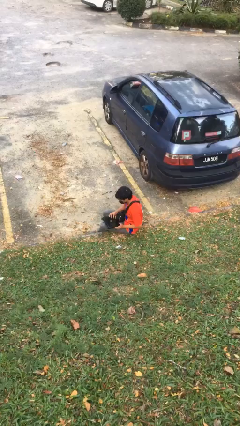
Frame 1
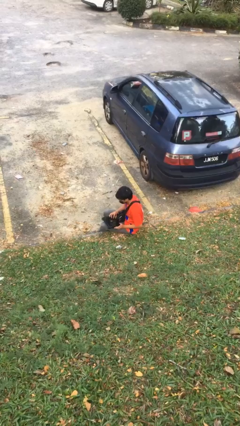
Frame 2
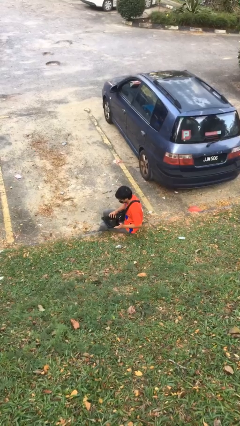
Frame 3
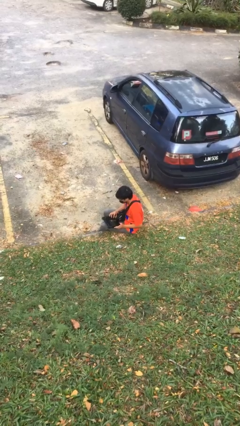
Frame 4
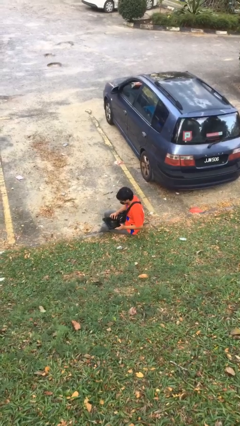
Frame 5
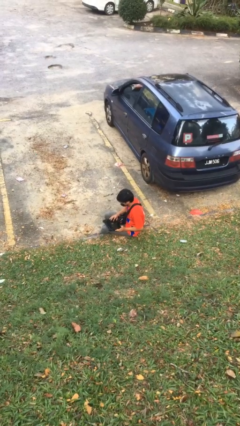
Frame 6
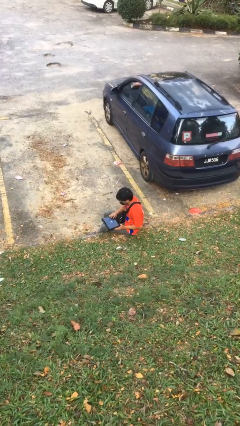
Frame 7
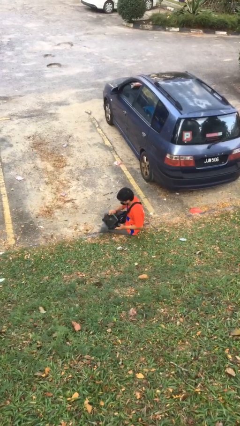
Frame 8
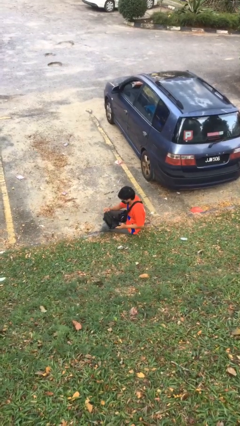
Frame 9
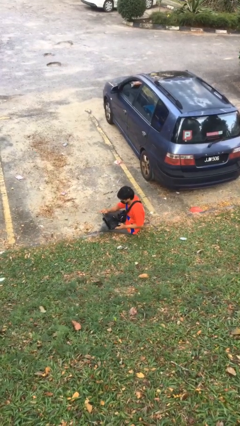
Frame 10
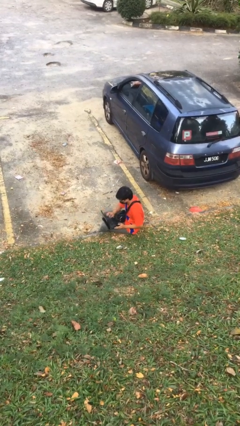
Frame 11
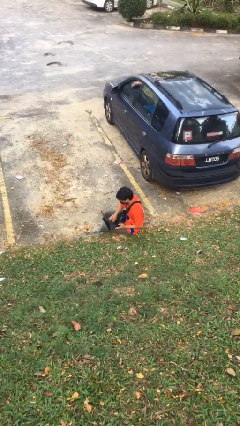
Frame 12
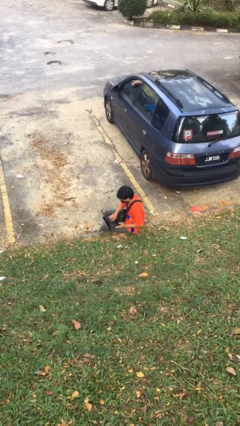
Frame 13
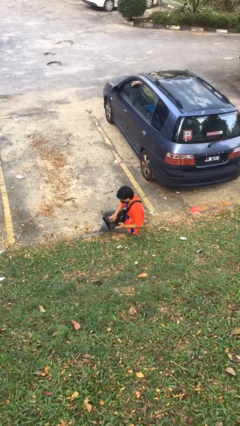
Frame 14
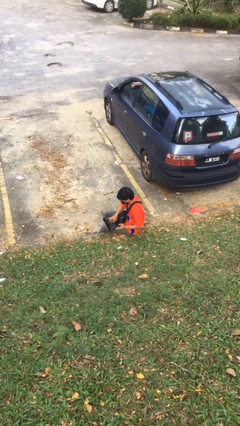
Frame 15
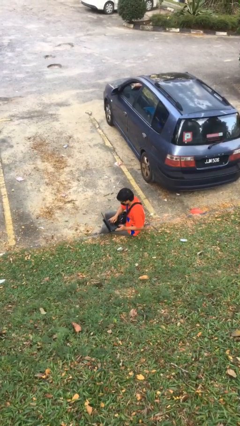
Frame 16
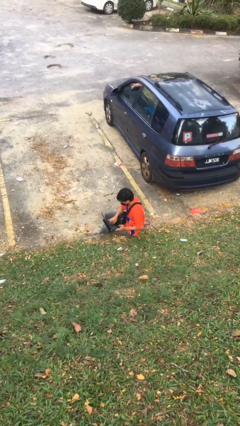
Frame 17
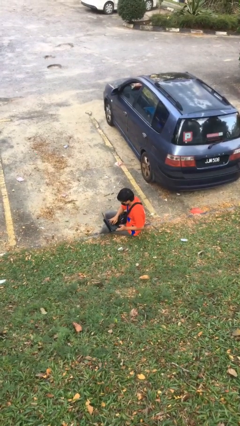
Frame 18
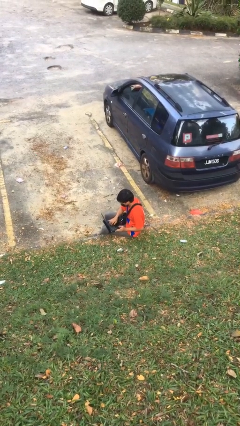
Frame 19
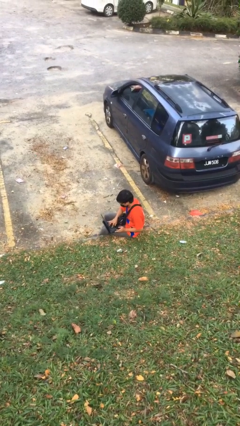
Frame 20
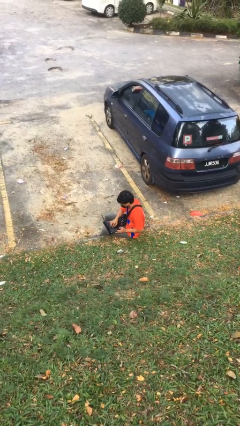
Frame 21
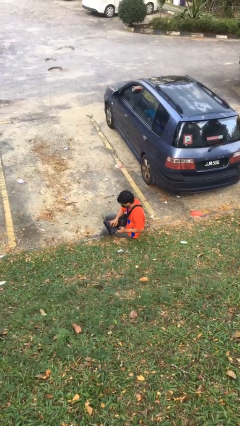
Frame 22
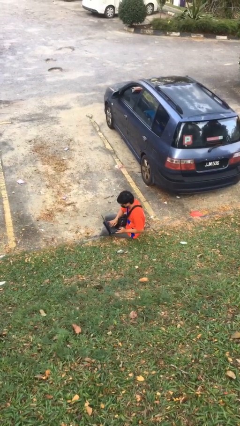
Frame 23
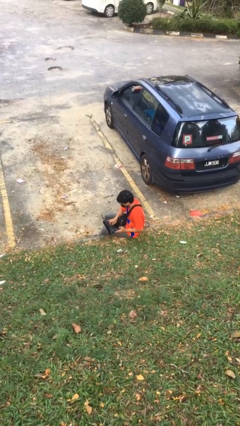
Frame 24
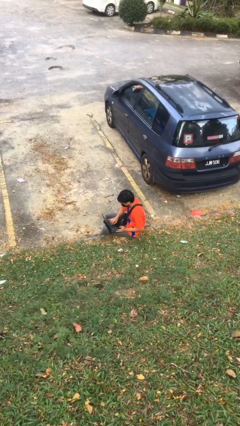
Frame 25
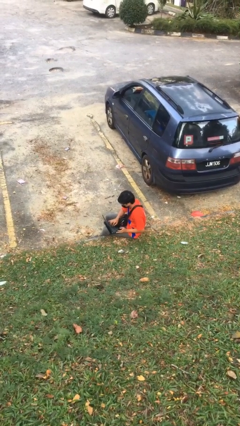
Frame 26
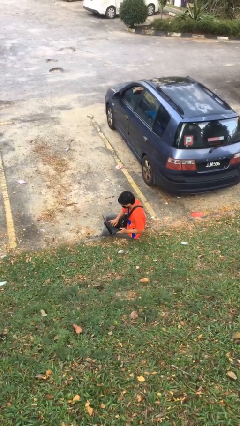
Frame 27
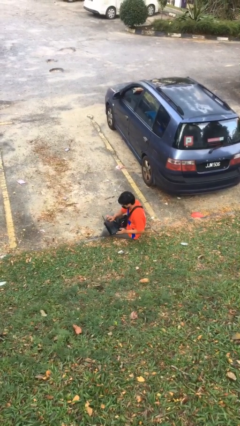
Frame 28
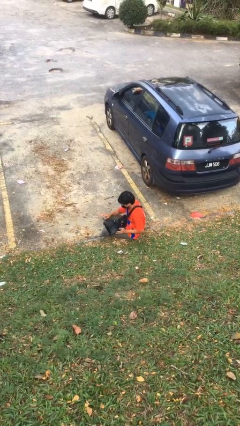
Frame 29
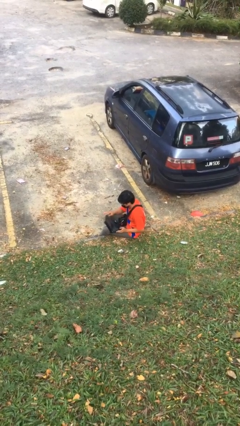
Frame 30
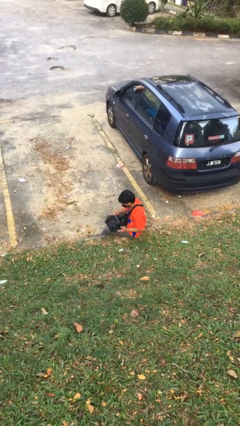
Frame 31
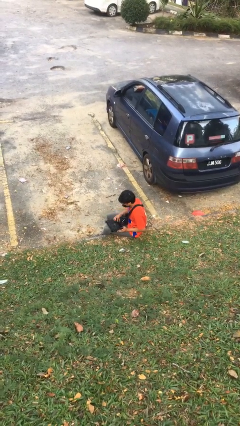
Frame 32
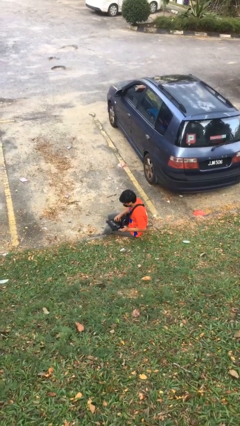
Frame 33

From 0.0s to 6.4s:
person interacts with laptop

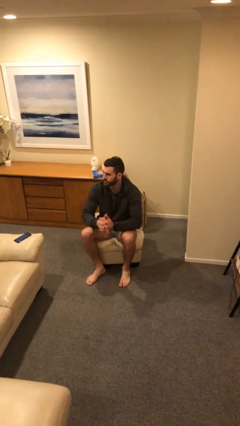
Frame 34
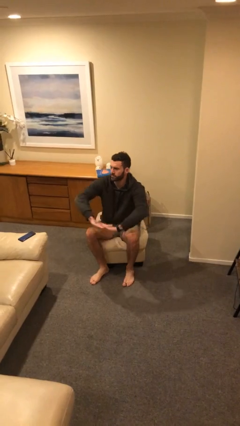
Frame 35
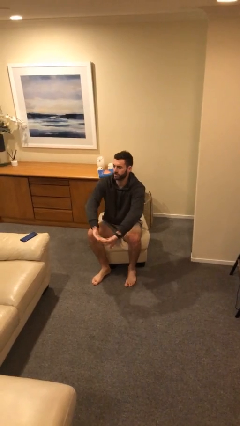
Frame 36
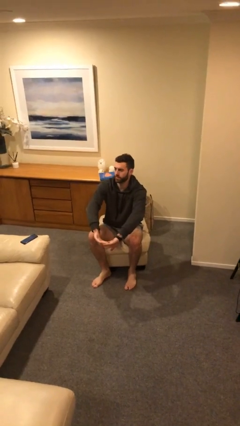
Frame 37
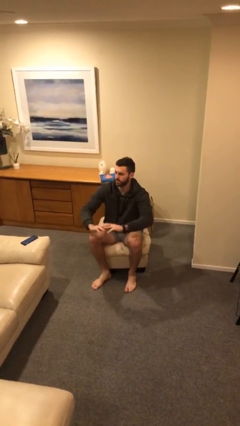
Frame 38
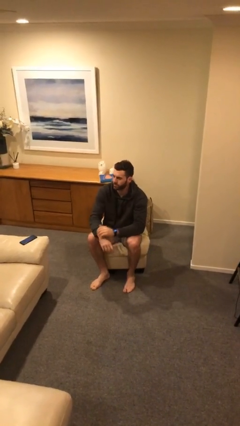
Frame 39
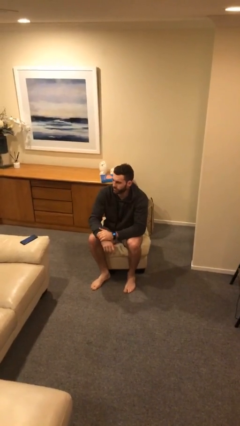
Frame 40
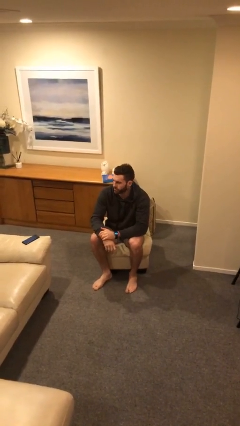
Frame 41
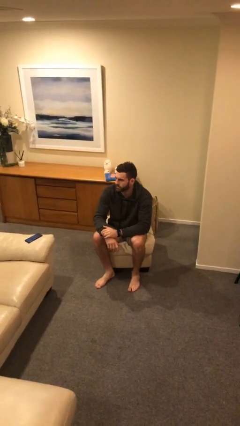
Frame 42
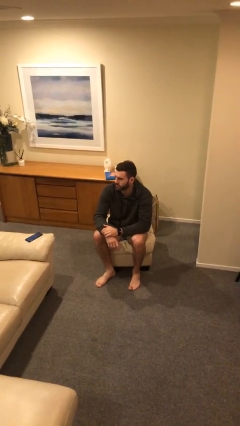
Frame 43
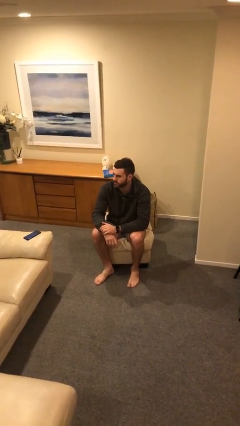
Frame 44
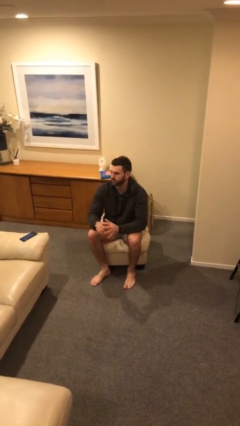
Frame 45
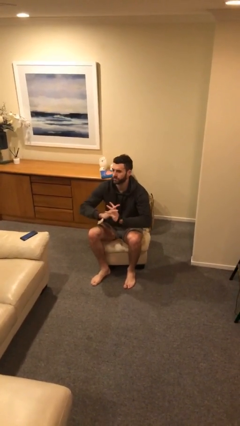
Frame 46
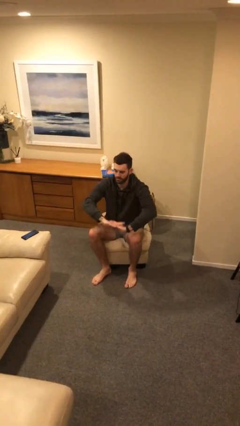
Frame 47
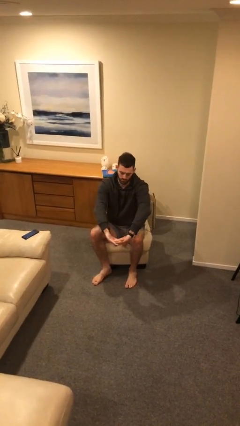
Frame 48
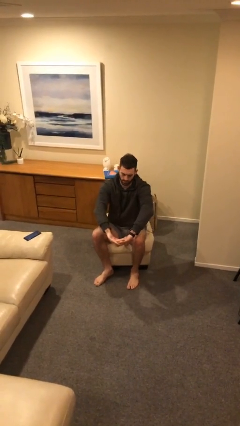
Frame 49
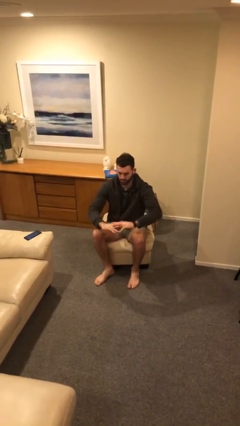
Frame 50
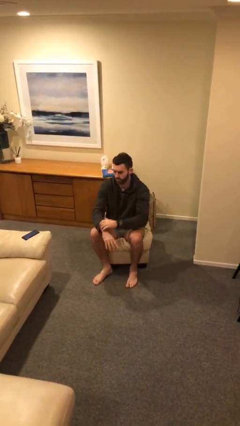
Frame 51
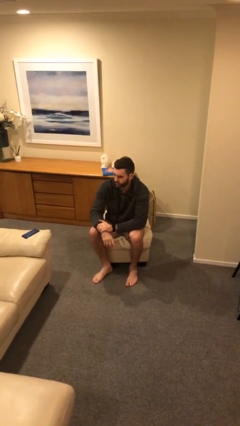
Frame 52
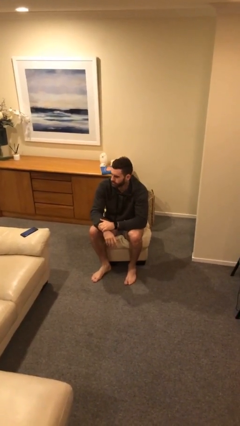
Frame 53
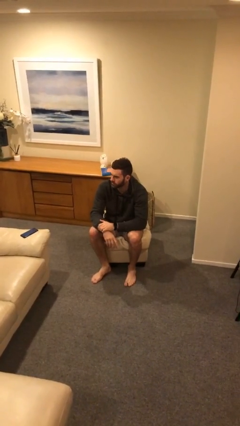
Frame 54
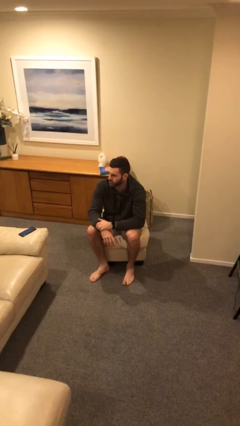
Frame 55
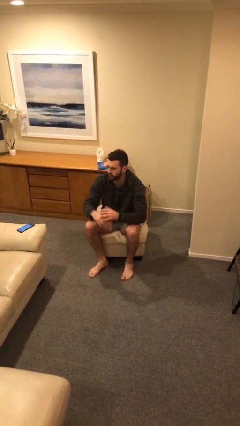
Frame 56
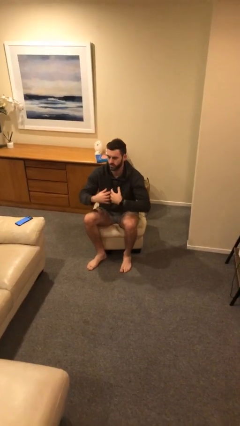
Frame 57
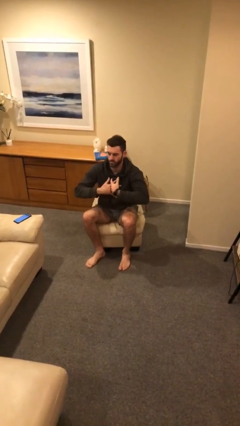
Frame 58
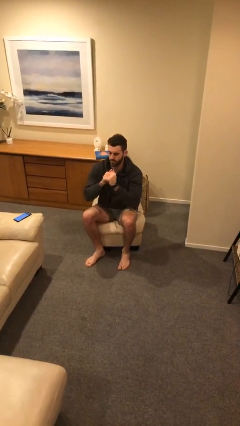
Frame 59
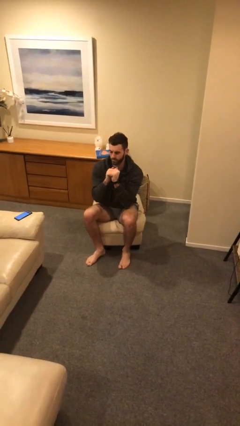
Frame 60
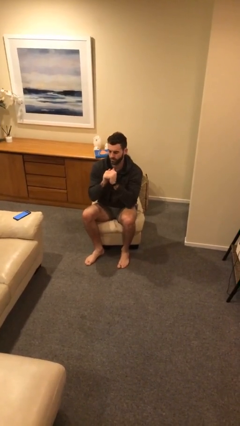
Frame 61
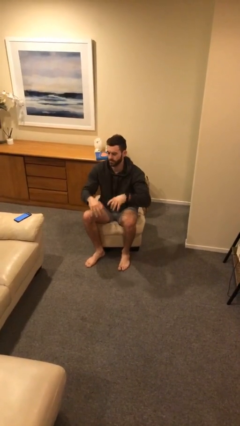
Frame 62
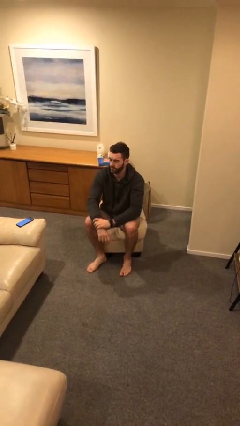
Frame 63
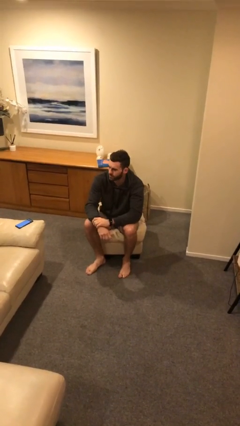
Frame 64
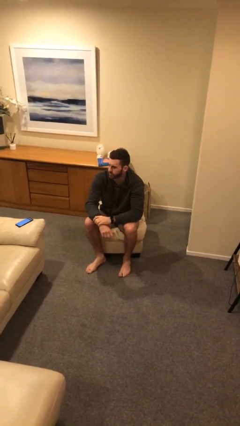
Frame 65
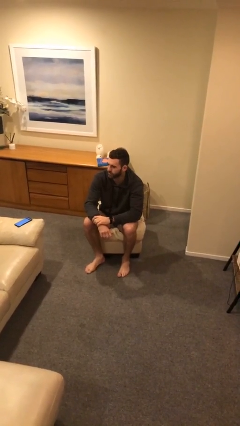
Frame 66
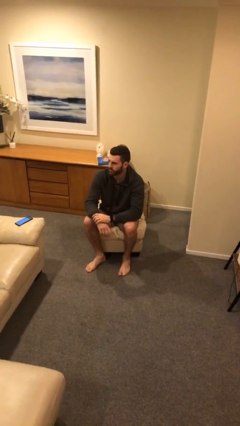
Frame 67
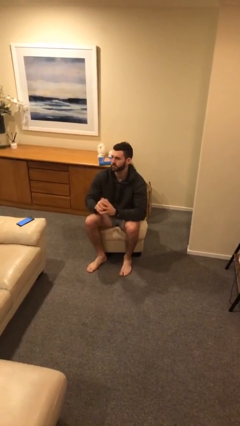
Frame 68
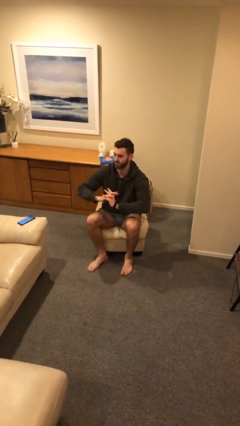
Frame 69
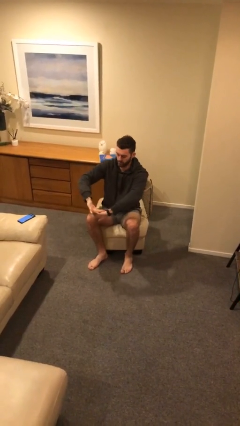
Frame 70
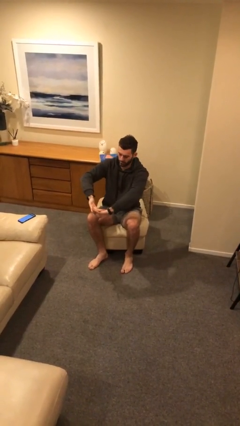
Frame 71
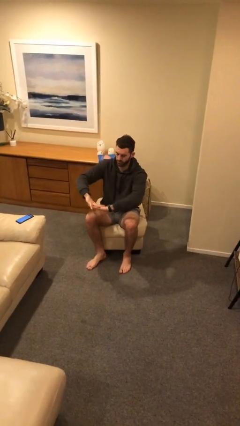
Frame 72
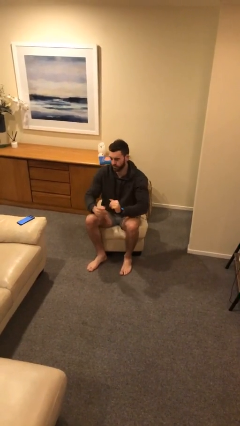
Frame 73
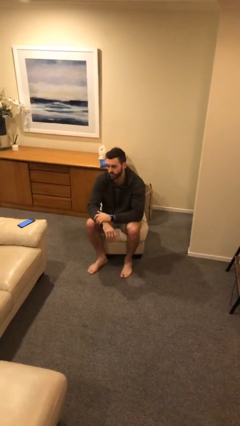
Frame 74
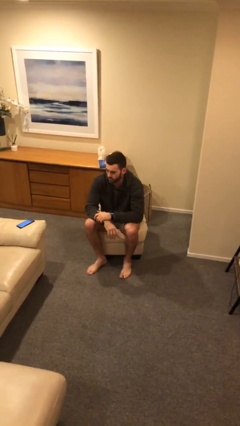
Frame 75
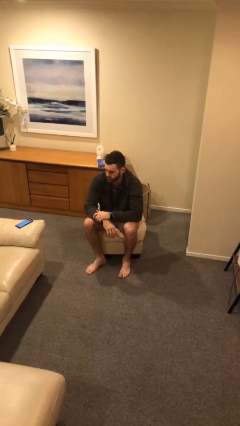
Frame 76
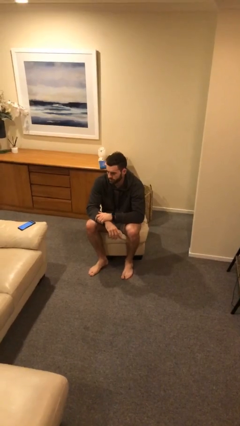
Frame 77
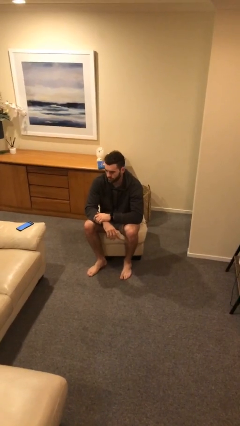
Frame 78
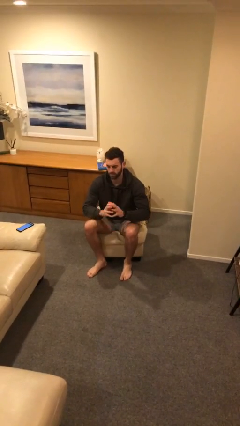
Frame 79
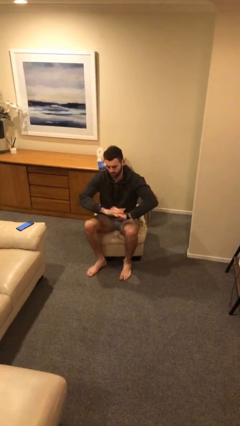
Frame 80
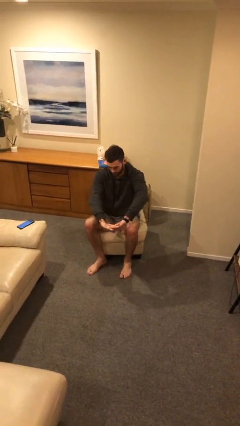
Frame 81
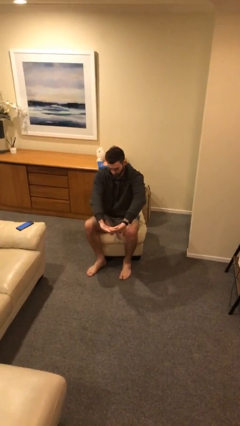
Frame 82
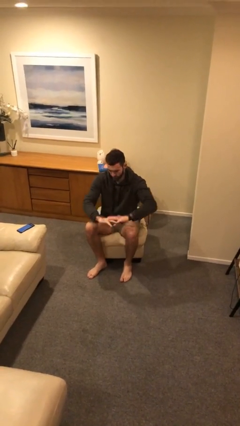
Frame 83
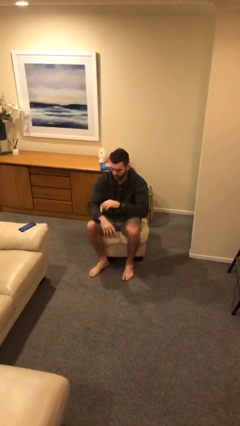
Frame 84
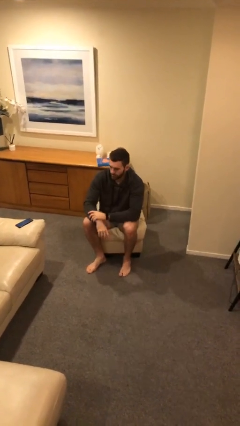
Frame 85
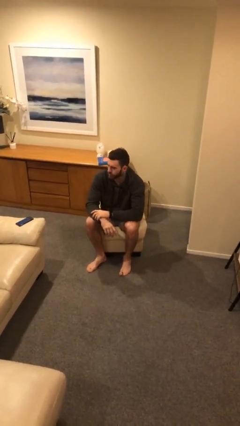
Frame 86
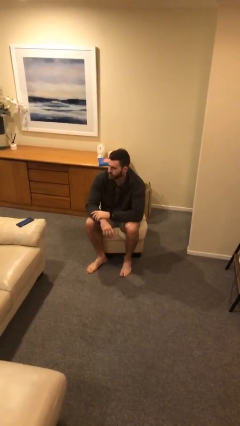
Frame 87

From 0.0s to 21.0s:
person cracks knuckles

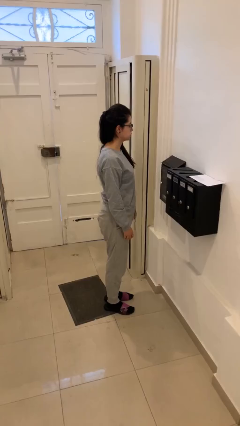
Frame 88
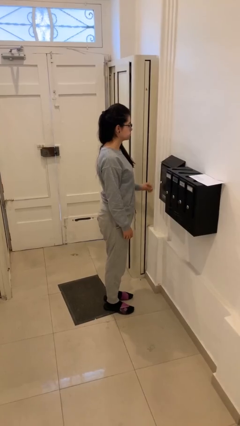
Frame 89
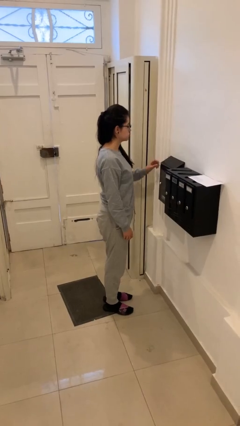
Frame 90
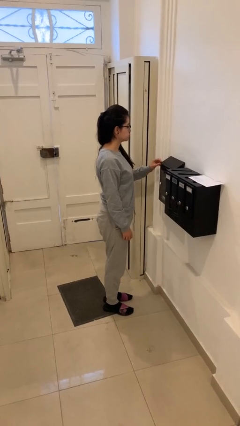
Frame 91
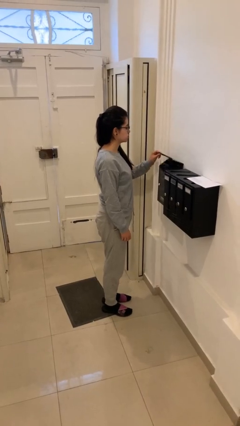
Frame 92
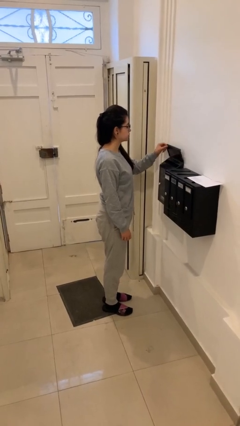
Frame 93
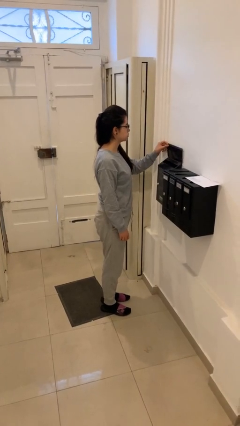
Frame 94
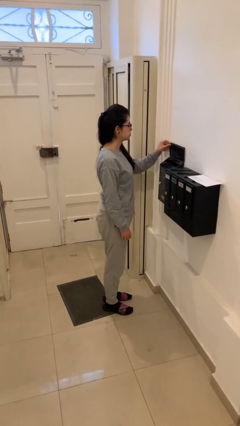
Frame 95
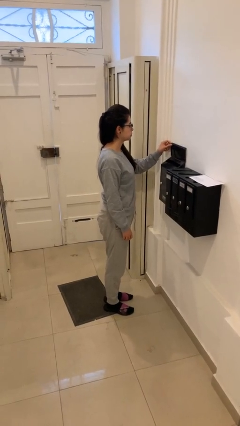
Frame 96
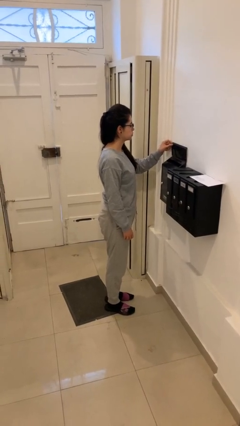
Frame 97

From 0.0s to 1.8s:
person opens mailbox
